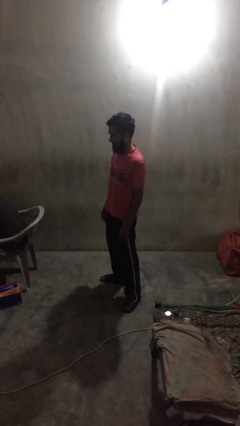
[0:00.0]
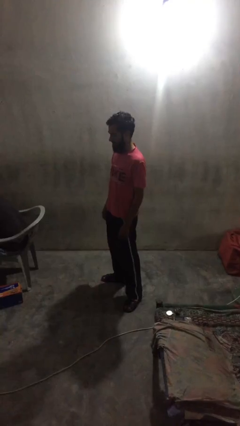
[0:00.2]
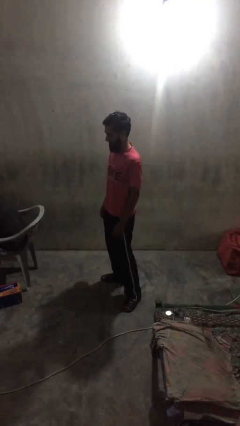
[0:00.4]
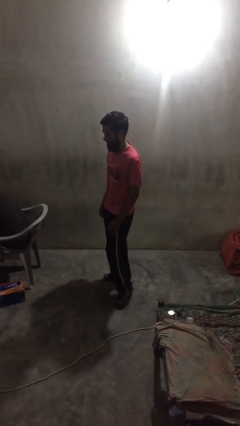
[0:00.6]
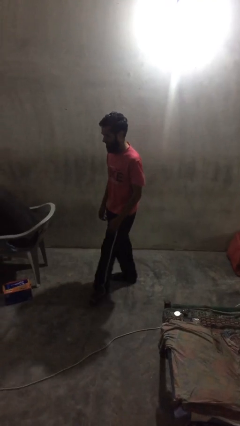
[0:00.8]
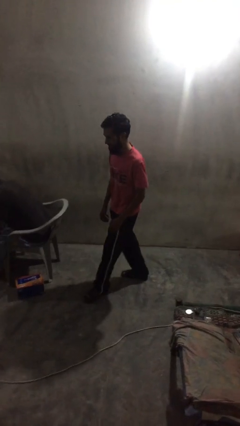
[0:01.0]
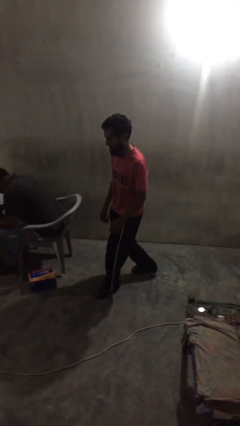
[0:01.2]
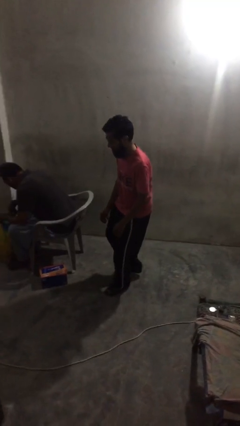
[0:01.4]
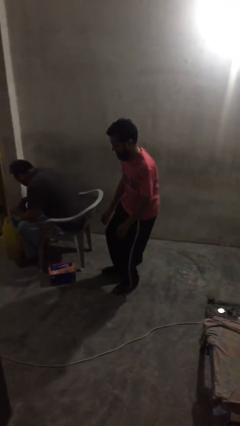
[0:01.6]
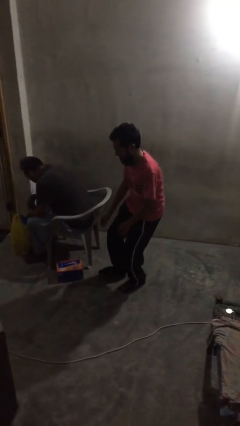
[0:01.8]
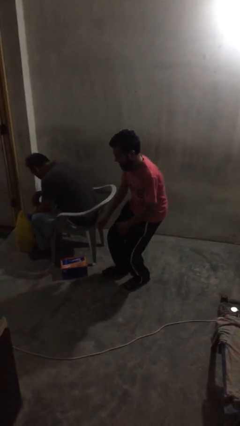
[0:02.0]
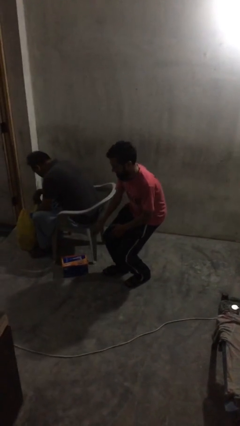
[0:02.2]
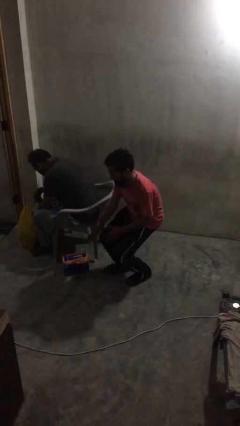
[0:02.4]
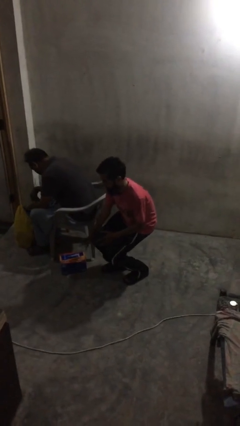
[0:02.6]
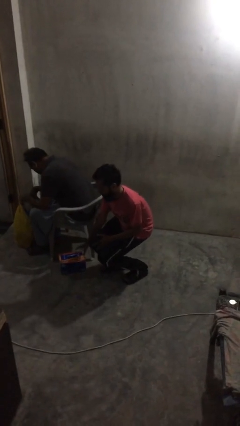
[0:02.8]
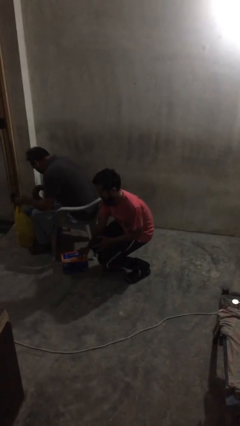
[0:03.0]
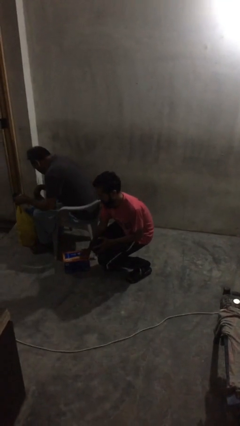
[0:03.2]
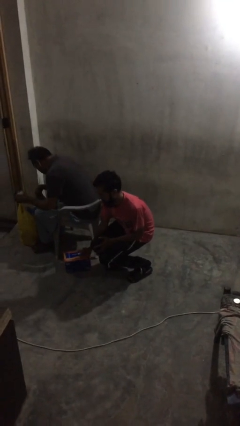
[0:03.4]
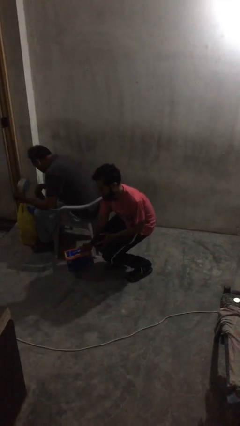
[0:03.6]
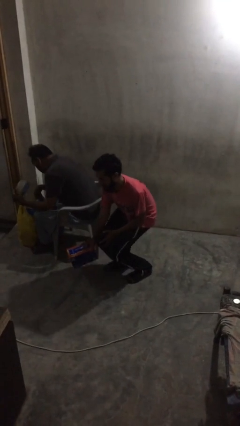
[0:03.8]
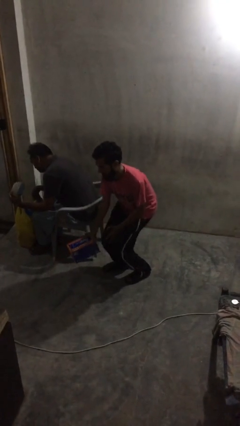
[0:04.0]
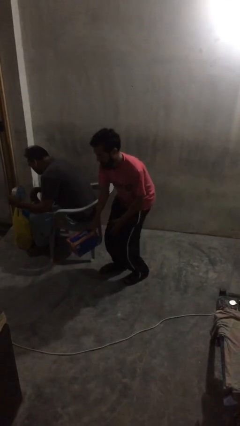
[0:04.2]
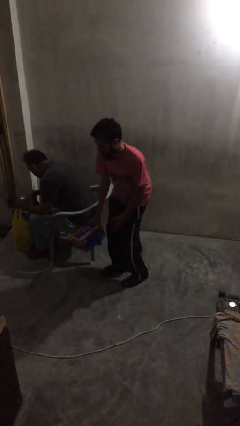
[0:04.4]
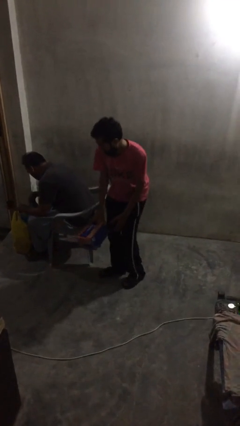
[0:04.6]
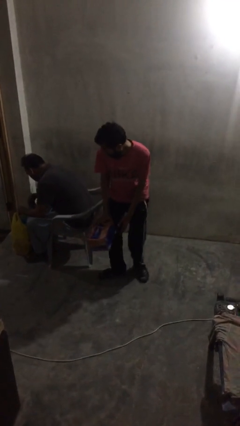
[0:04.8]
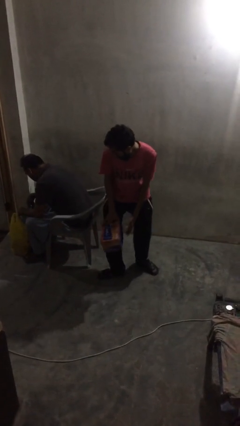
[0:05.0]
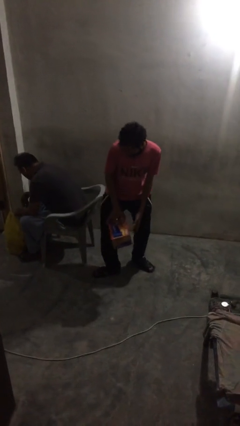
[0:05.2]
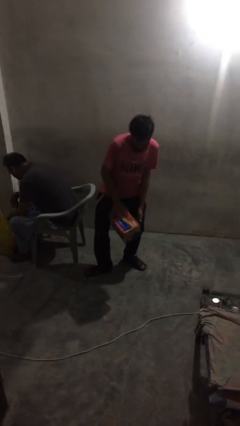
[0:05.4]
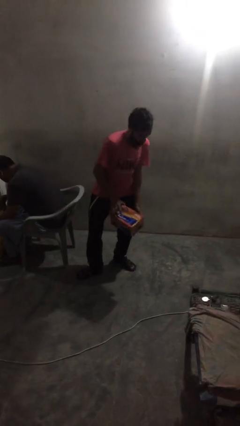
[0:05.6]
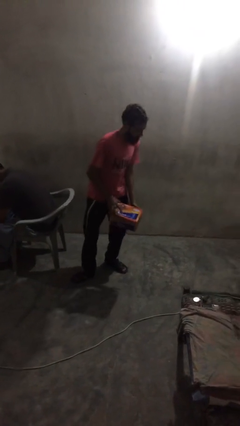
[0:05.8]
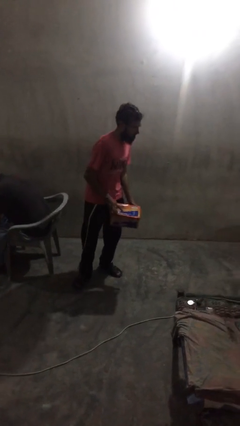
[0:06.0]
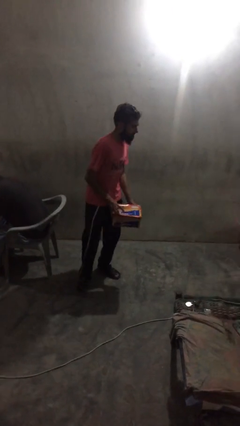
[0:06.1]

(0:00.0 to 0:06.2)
person steals object from person

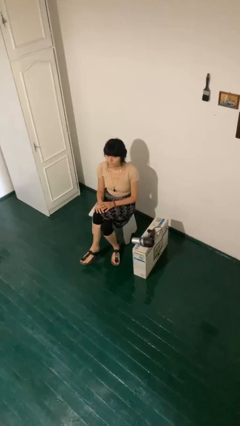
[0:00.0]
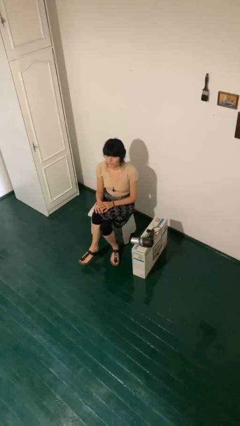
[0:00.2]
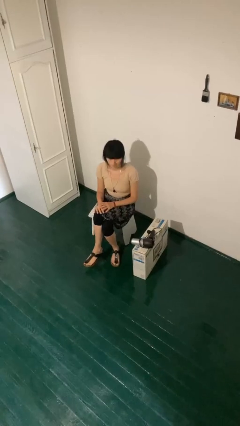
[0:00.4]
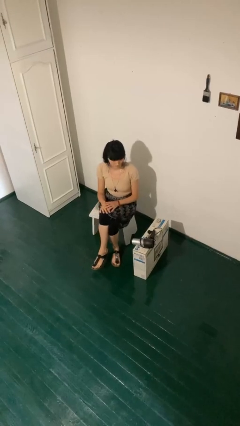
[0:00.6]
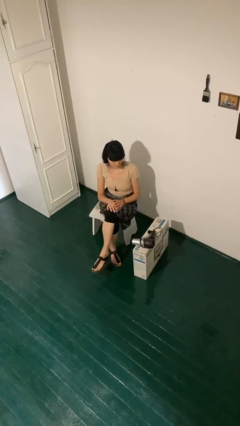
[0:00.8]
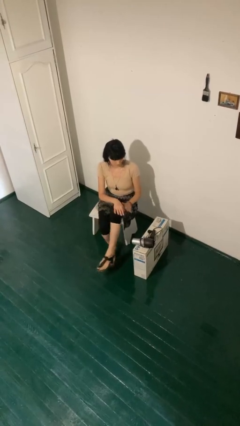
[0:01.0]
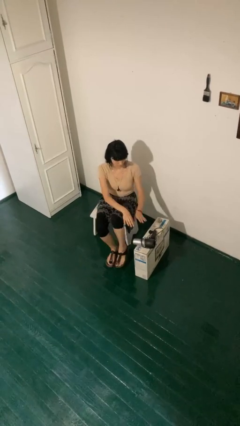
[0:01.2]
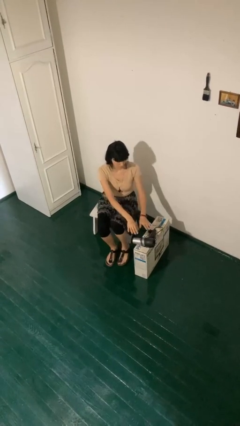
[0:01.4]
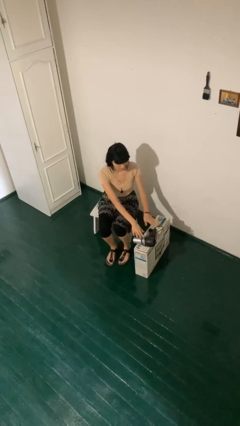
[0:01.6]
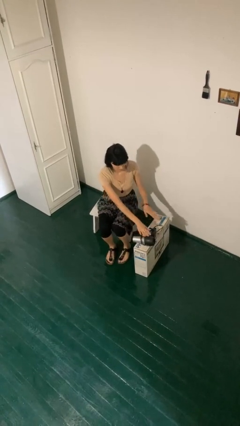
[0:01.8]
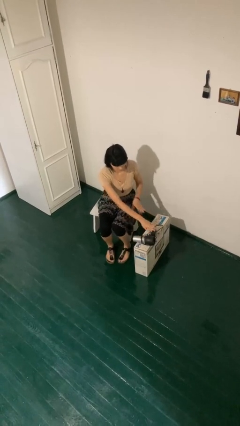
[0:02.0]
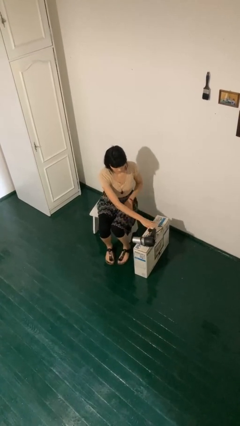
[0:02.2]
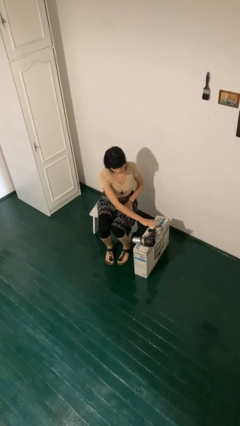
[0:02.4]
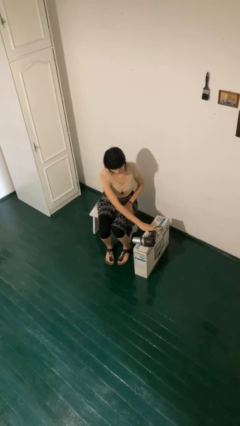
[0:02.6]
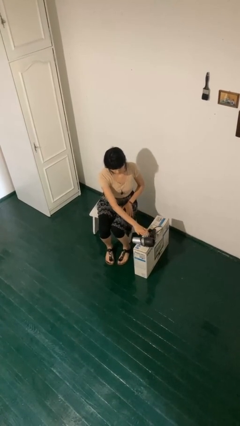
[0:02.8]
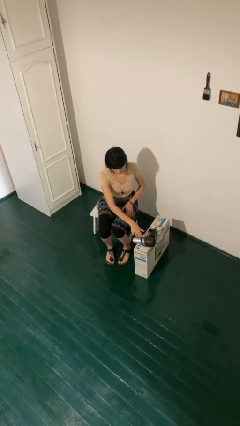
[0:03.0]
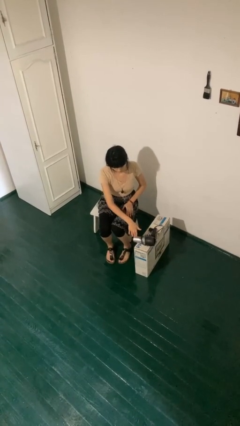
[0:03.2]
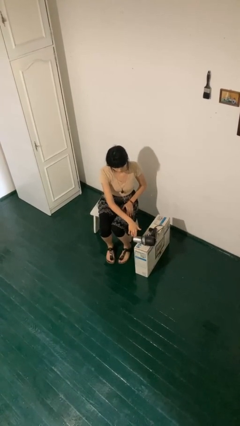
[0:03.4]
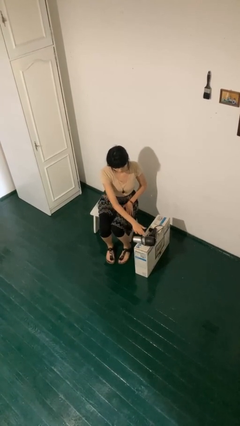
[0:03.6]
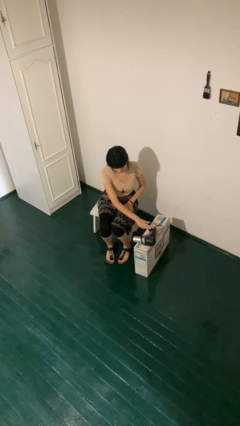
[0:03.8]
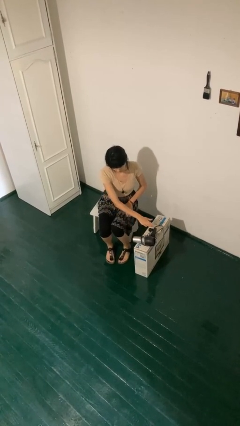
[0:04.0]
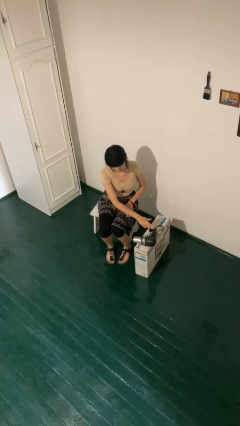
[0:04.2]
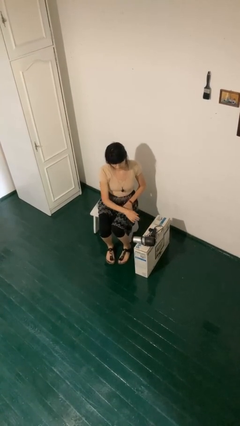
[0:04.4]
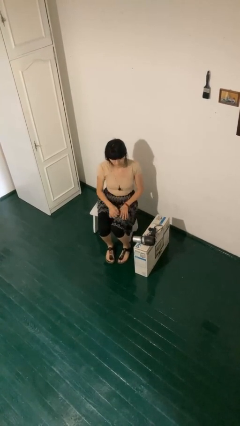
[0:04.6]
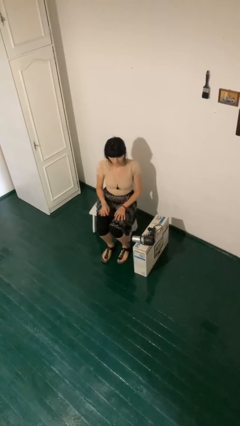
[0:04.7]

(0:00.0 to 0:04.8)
person waves hand over object

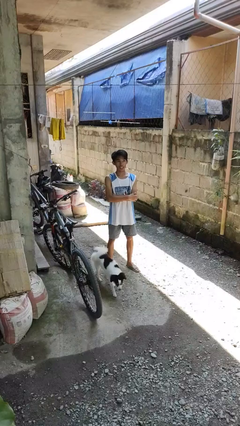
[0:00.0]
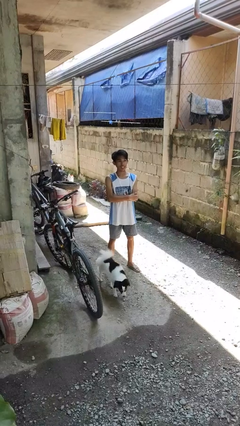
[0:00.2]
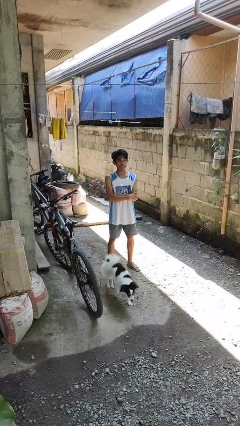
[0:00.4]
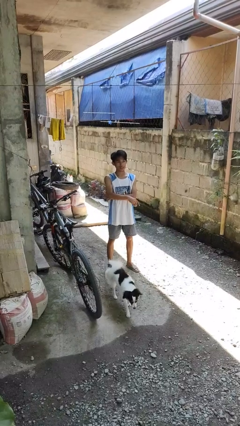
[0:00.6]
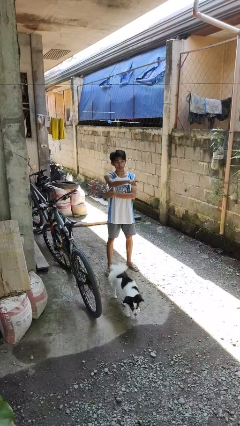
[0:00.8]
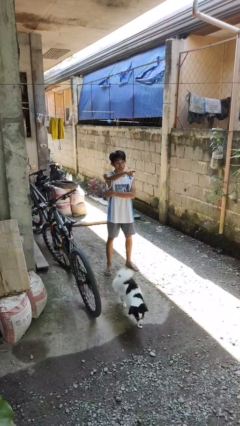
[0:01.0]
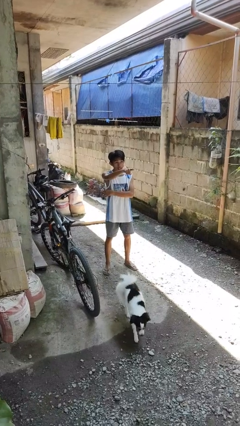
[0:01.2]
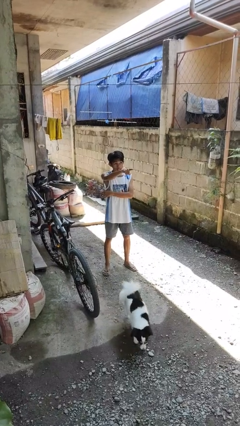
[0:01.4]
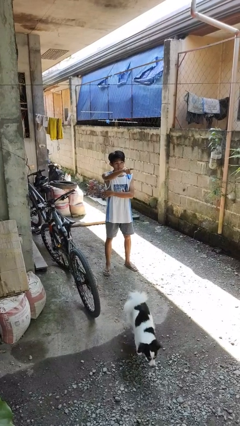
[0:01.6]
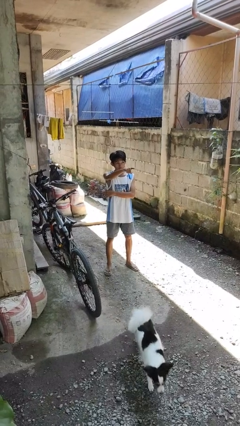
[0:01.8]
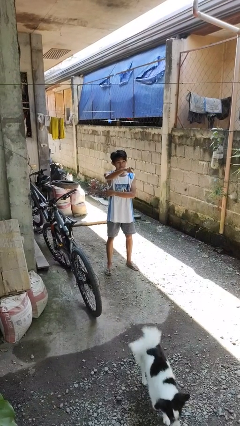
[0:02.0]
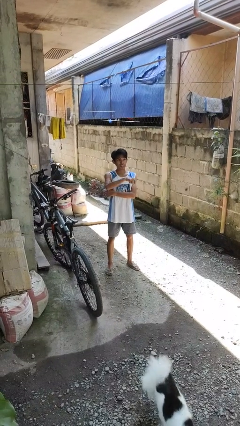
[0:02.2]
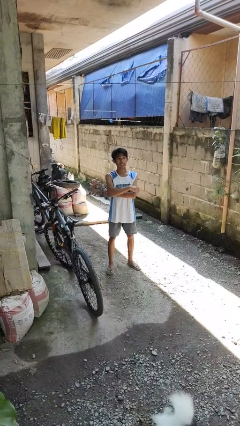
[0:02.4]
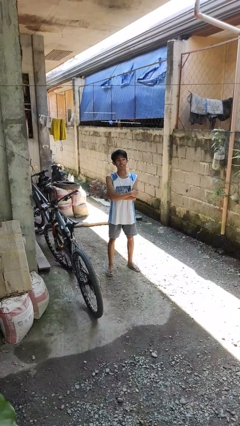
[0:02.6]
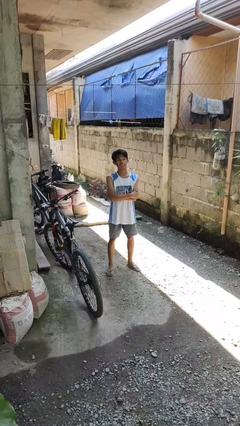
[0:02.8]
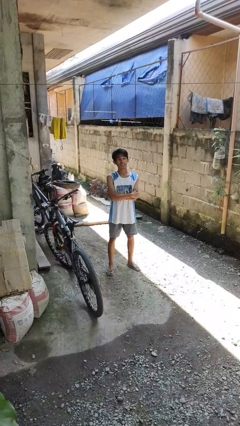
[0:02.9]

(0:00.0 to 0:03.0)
person points at person

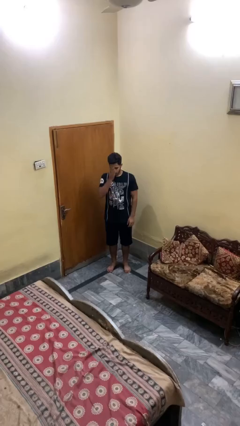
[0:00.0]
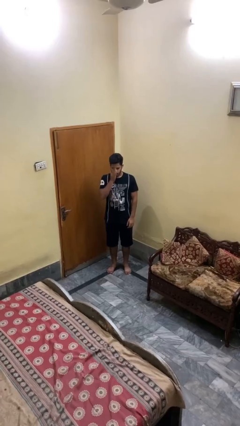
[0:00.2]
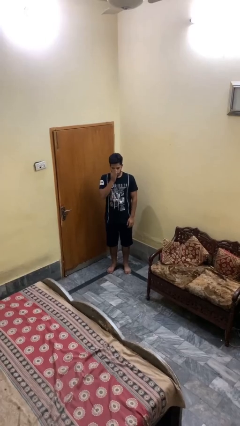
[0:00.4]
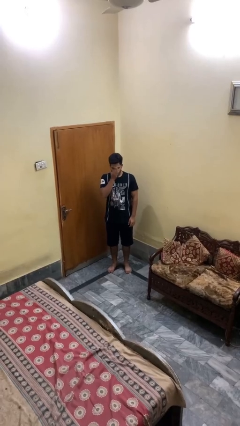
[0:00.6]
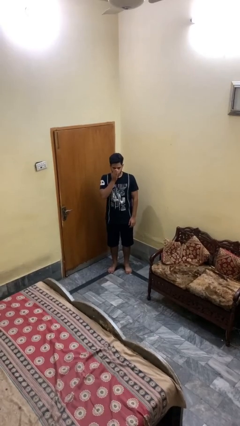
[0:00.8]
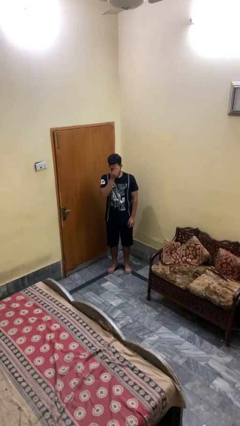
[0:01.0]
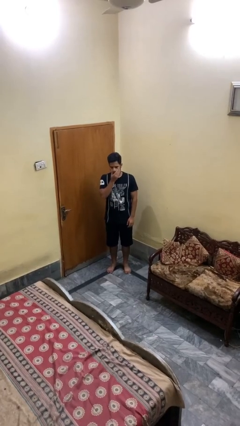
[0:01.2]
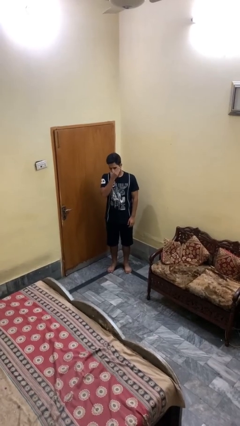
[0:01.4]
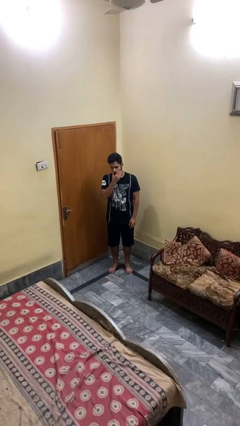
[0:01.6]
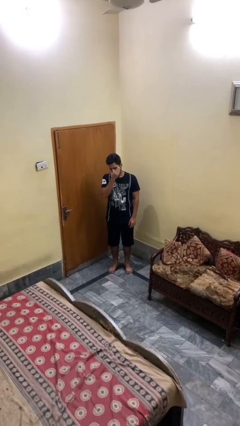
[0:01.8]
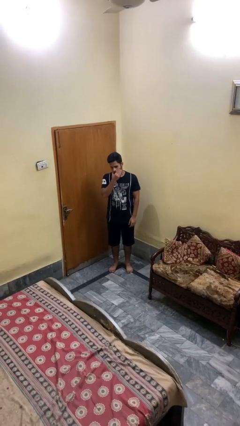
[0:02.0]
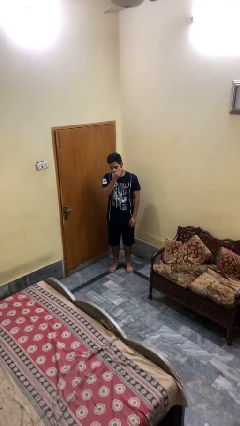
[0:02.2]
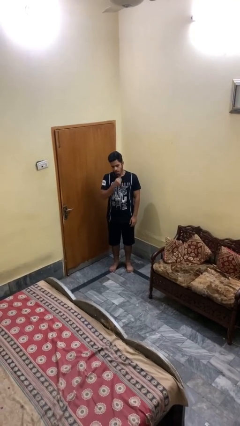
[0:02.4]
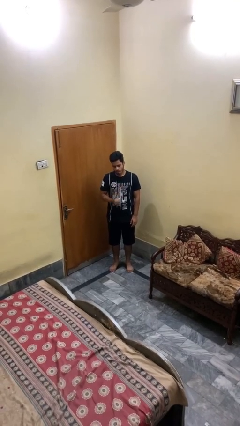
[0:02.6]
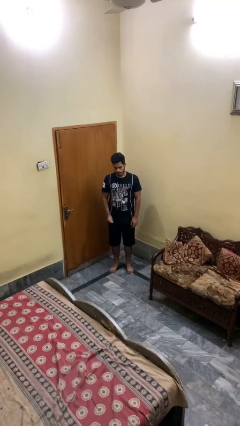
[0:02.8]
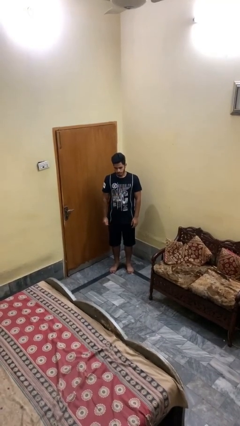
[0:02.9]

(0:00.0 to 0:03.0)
person scratches face

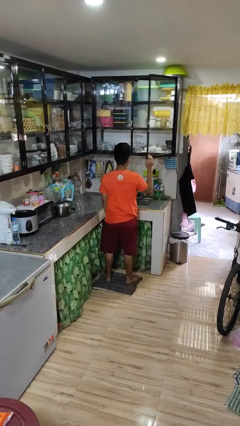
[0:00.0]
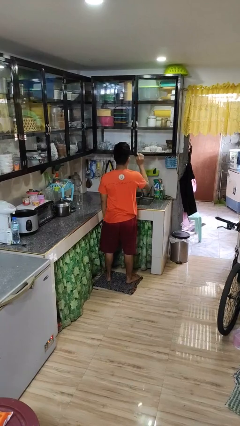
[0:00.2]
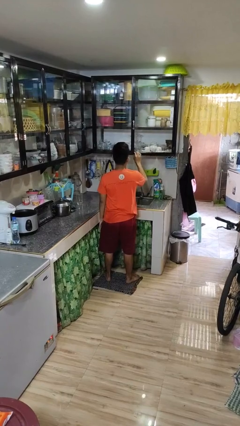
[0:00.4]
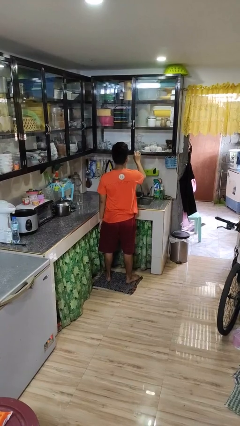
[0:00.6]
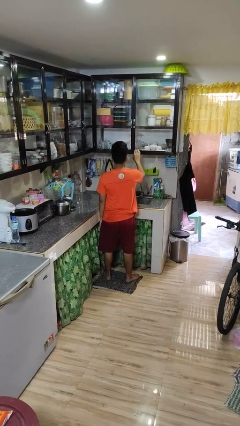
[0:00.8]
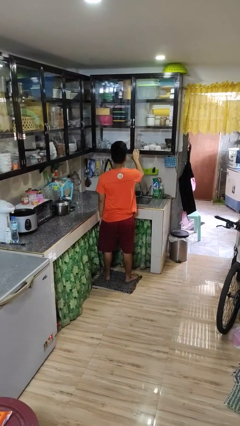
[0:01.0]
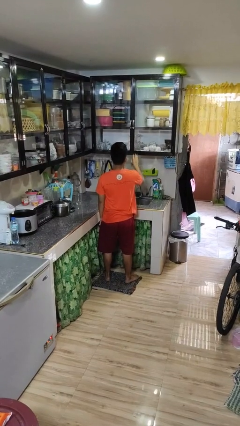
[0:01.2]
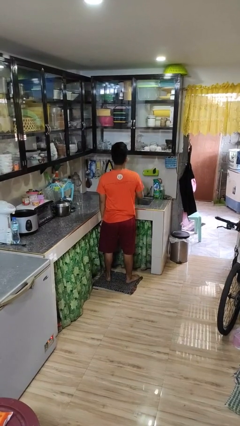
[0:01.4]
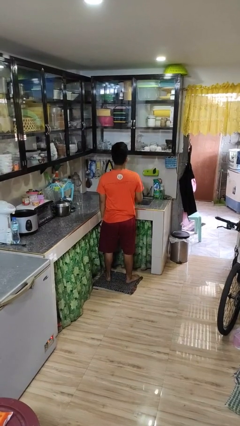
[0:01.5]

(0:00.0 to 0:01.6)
person closes cabinet
